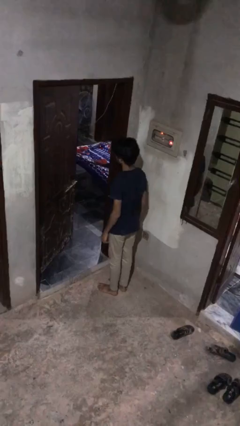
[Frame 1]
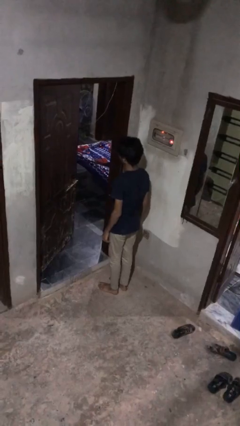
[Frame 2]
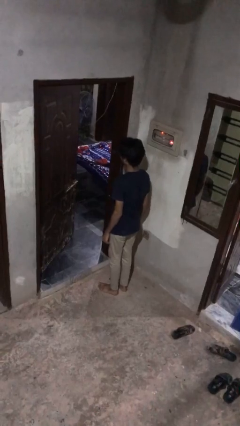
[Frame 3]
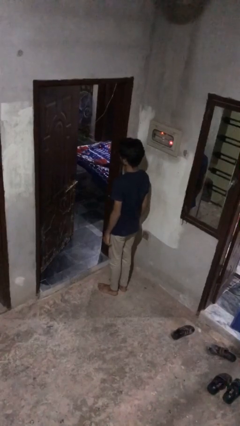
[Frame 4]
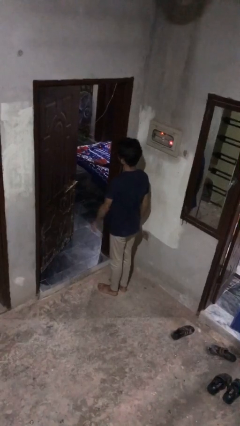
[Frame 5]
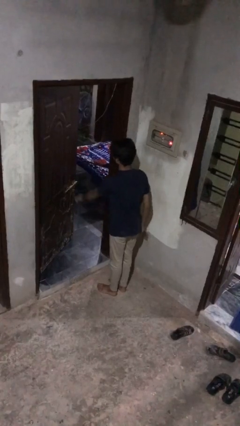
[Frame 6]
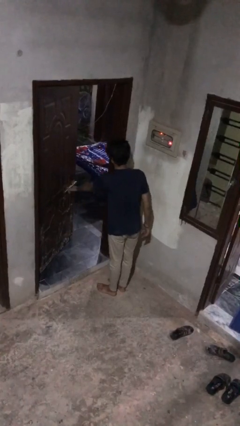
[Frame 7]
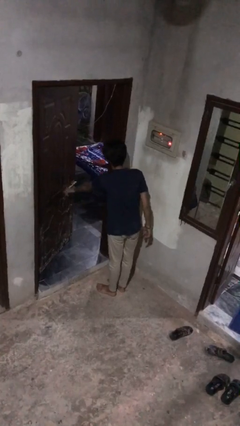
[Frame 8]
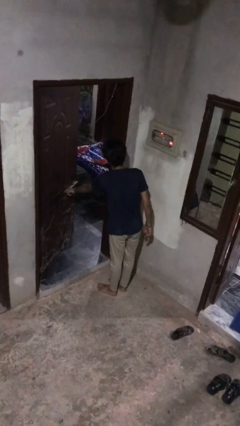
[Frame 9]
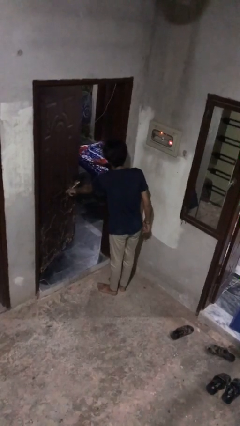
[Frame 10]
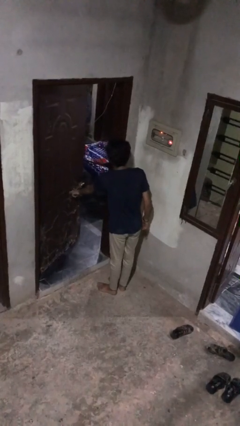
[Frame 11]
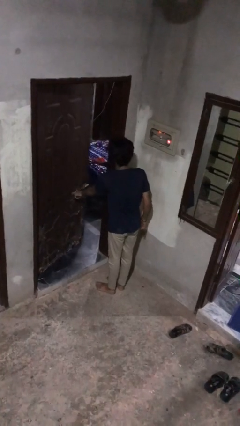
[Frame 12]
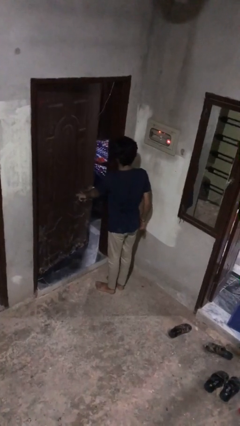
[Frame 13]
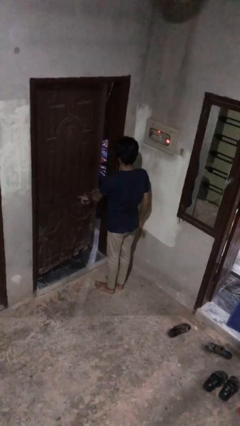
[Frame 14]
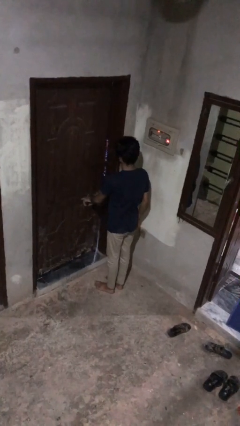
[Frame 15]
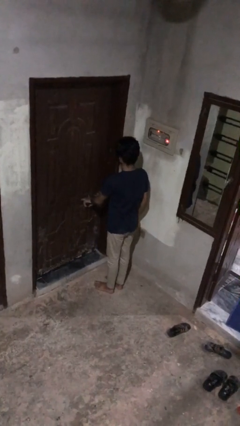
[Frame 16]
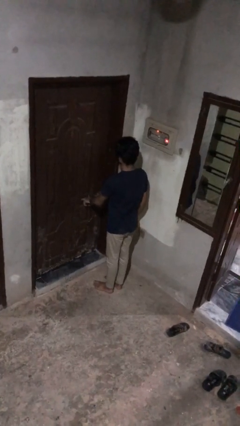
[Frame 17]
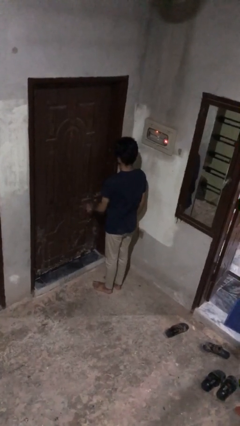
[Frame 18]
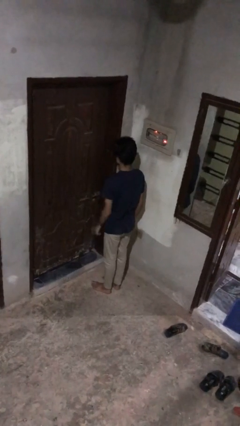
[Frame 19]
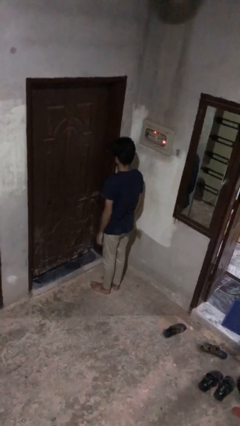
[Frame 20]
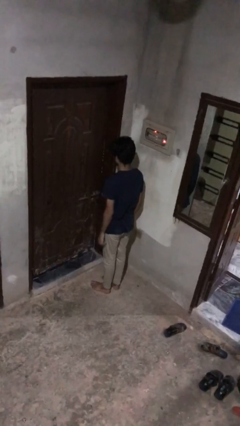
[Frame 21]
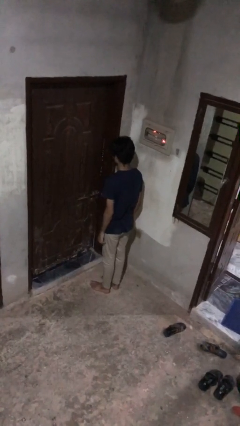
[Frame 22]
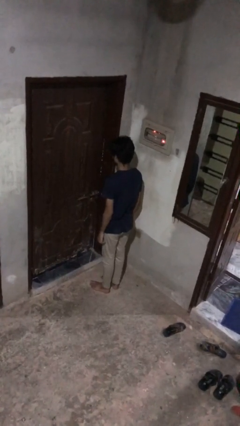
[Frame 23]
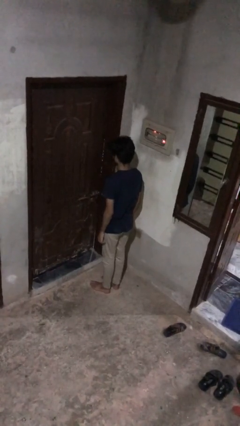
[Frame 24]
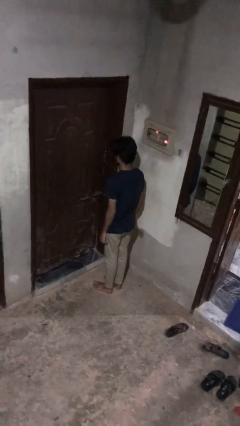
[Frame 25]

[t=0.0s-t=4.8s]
person closes facility door

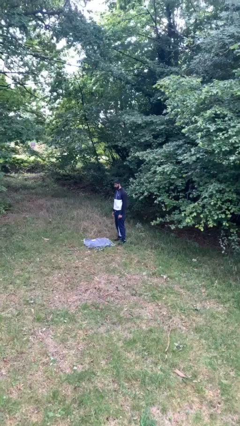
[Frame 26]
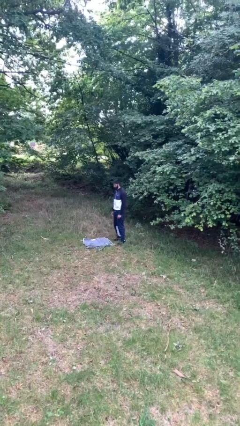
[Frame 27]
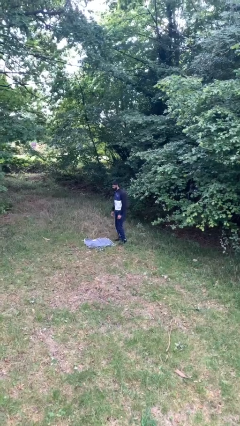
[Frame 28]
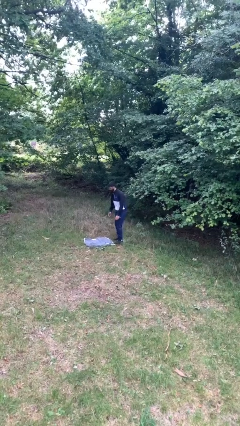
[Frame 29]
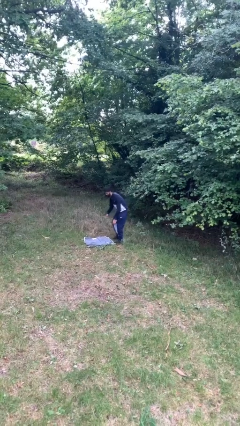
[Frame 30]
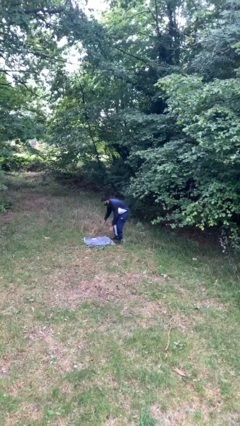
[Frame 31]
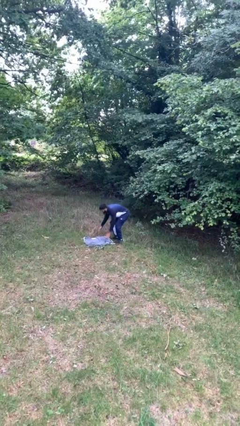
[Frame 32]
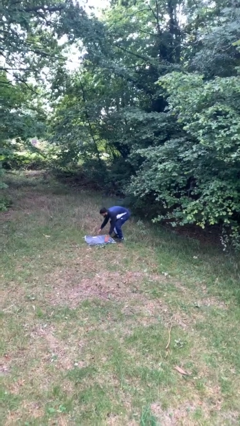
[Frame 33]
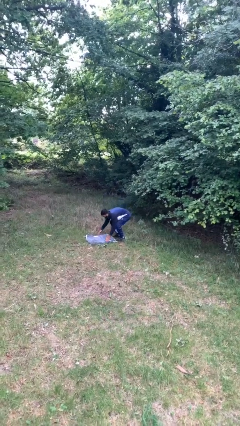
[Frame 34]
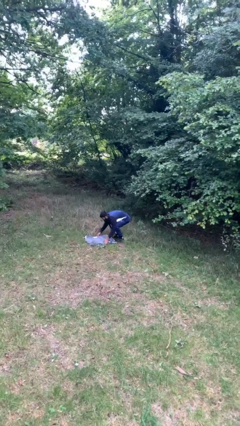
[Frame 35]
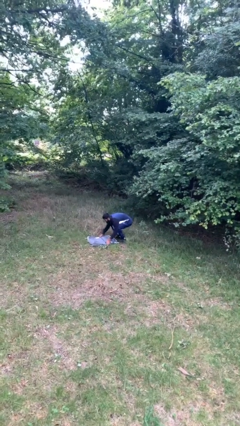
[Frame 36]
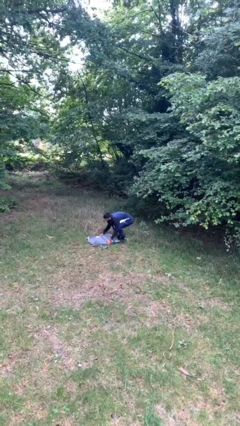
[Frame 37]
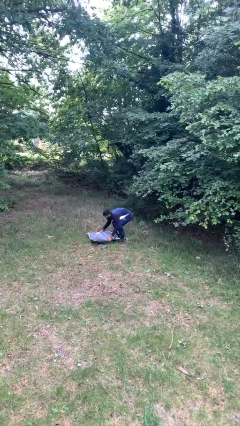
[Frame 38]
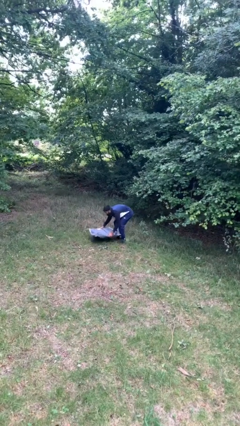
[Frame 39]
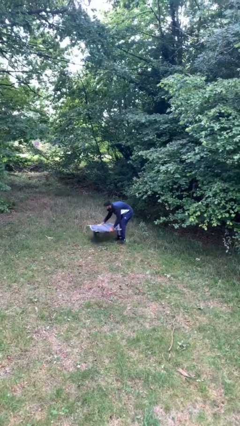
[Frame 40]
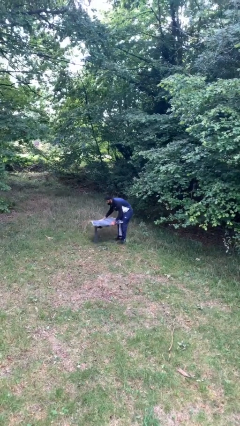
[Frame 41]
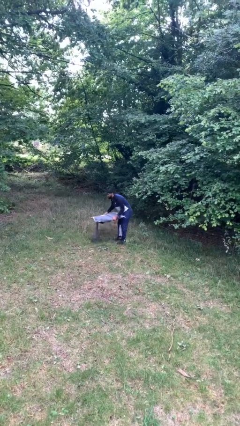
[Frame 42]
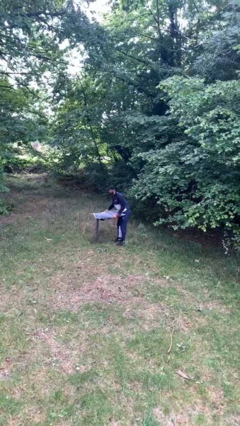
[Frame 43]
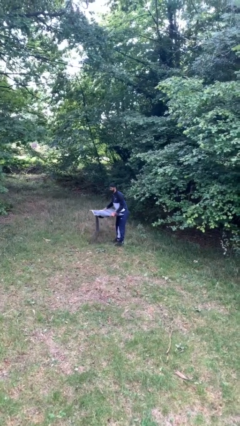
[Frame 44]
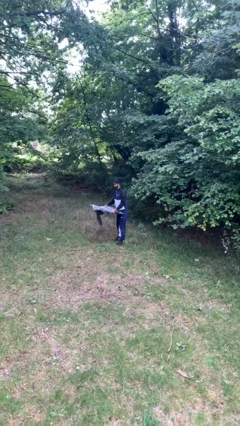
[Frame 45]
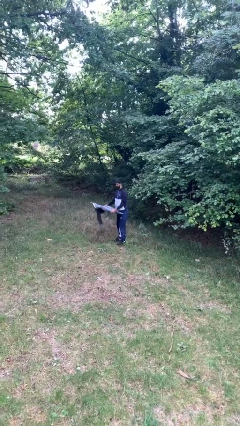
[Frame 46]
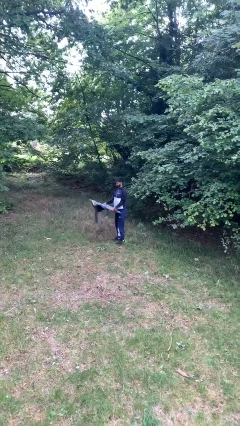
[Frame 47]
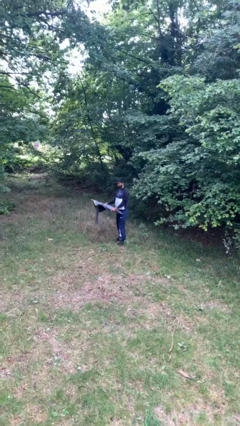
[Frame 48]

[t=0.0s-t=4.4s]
person picks up object from floor

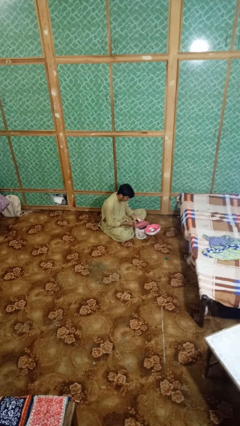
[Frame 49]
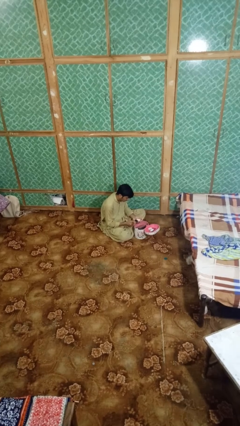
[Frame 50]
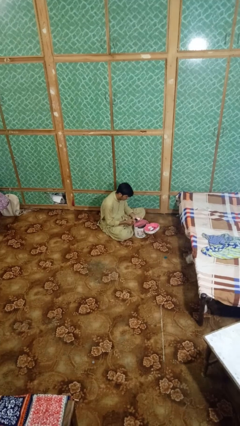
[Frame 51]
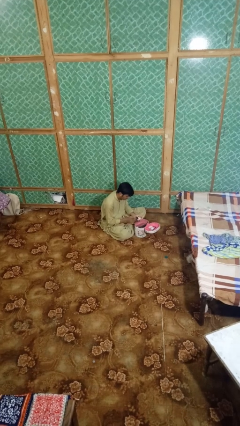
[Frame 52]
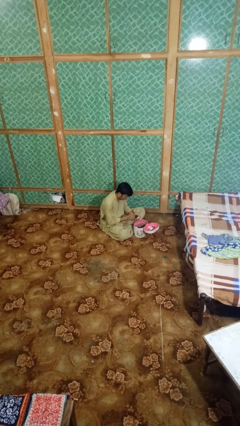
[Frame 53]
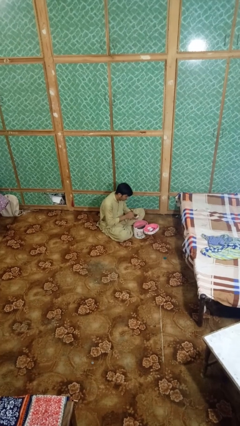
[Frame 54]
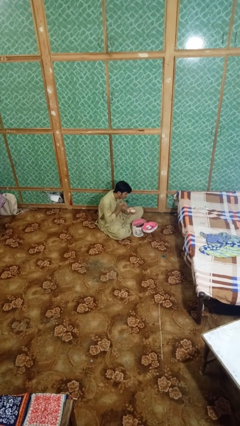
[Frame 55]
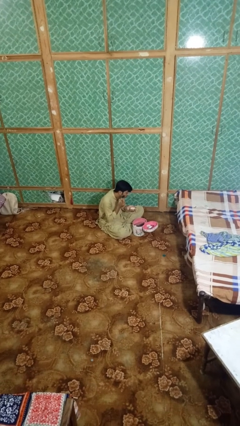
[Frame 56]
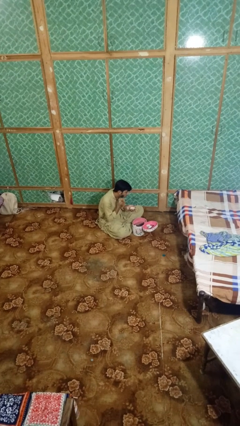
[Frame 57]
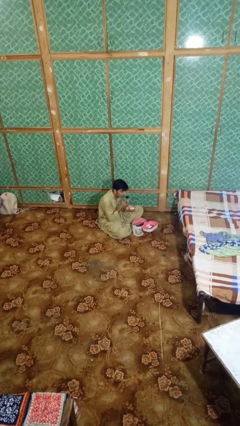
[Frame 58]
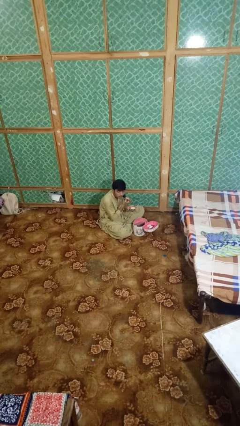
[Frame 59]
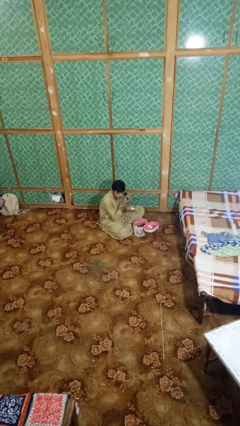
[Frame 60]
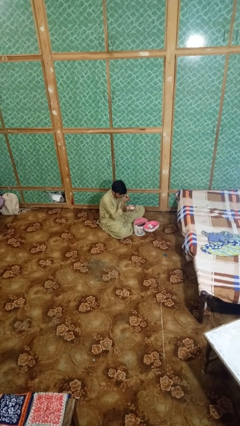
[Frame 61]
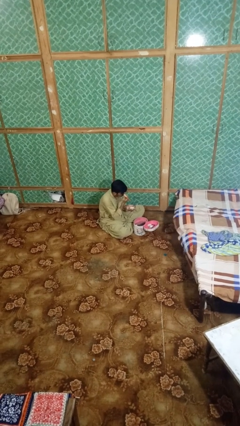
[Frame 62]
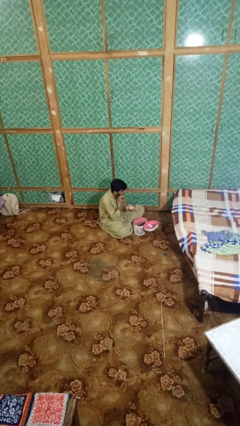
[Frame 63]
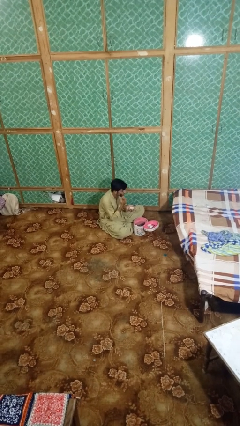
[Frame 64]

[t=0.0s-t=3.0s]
person applies foundation makeup

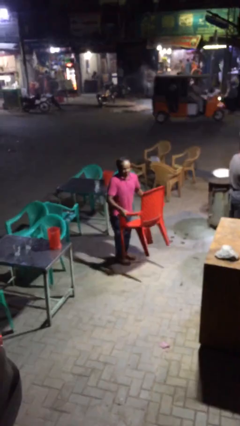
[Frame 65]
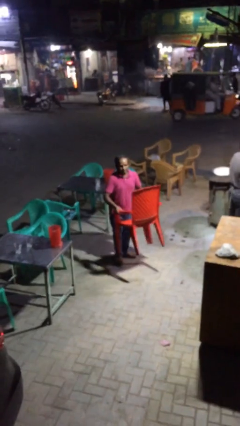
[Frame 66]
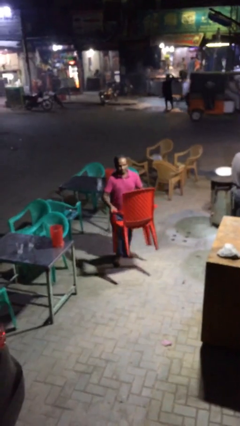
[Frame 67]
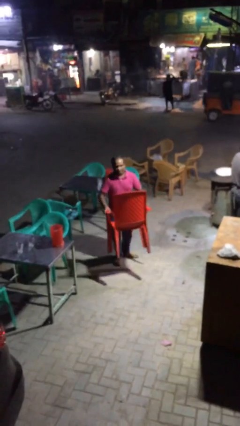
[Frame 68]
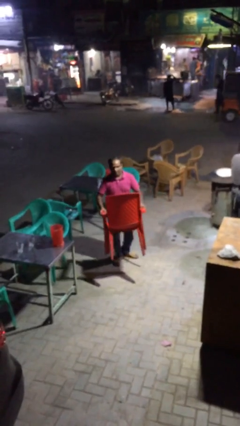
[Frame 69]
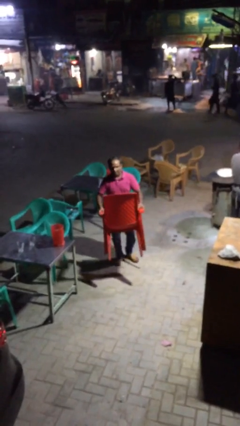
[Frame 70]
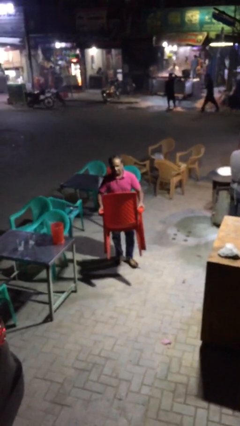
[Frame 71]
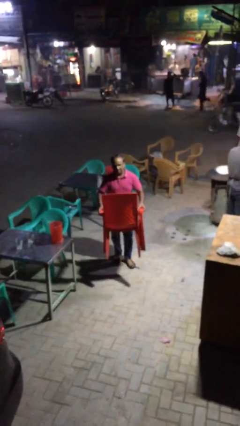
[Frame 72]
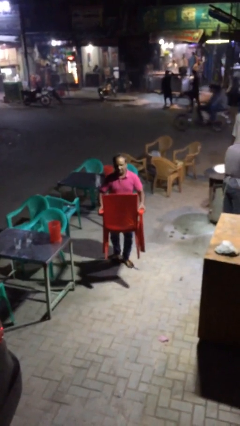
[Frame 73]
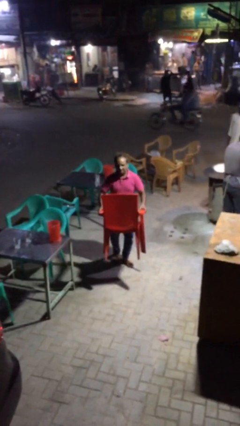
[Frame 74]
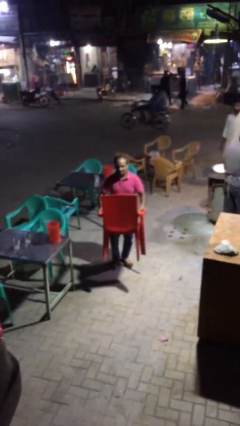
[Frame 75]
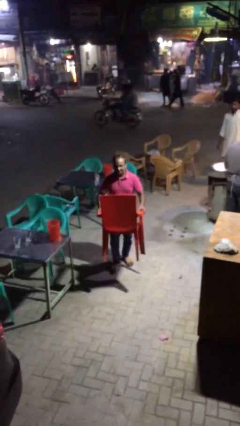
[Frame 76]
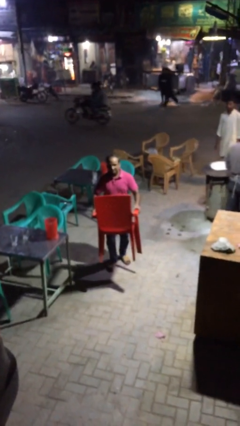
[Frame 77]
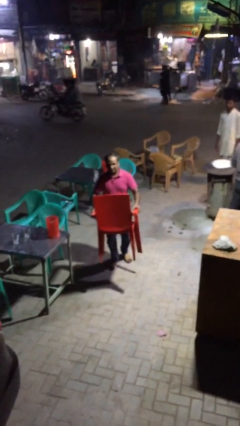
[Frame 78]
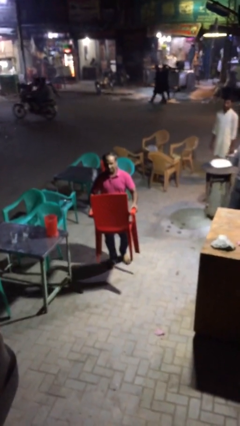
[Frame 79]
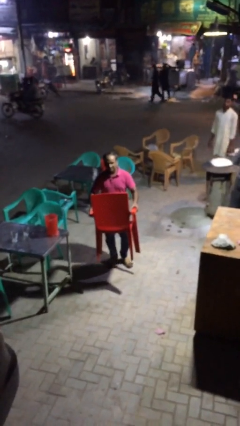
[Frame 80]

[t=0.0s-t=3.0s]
person carries heavy object

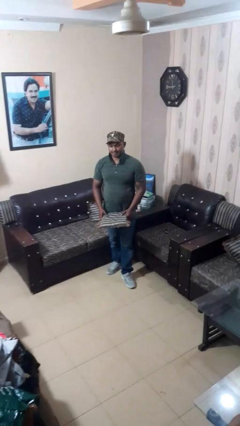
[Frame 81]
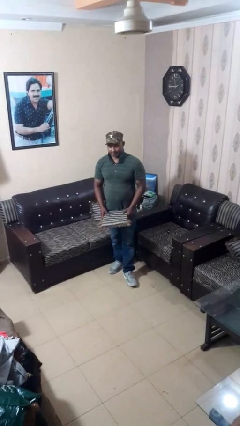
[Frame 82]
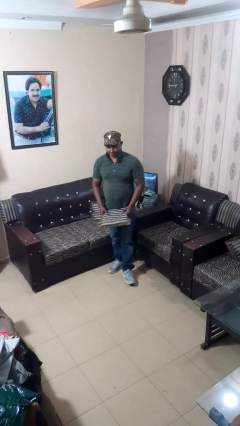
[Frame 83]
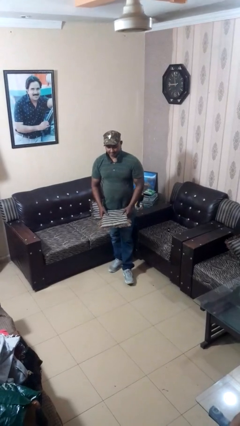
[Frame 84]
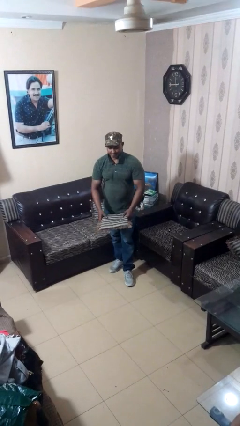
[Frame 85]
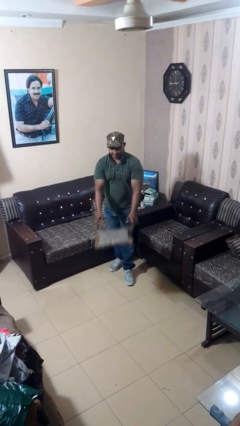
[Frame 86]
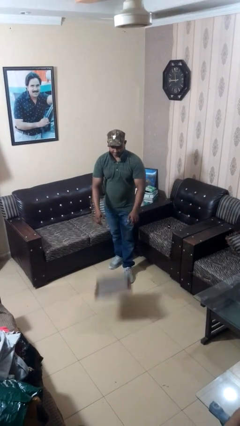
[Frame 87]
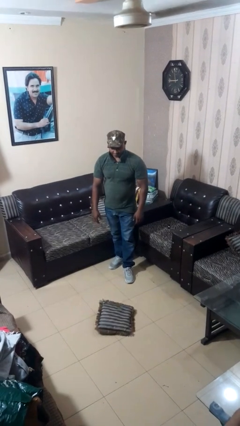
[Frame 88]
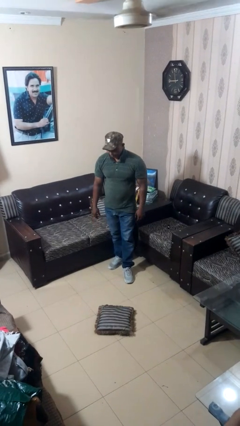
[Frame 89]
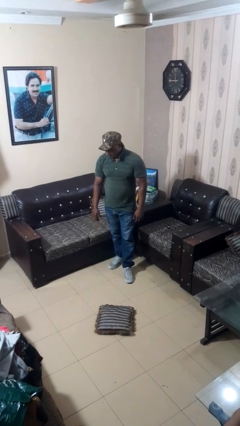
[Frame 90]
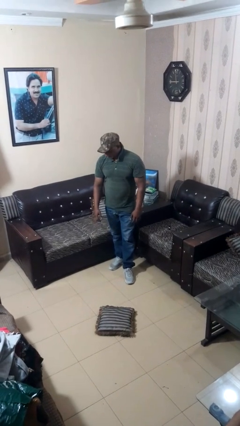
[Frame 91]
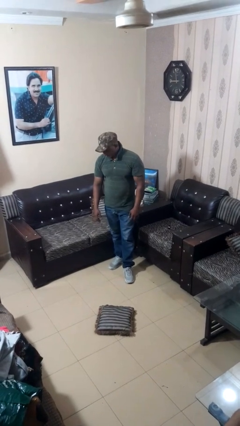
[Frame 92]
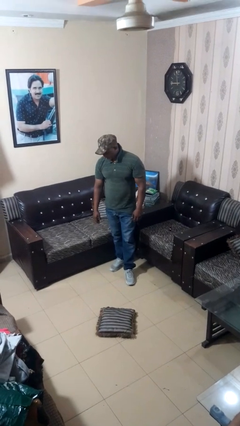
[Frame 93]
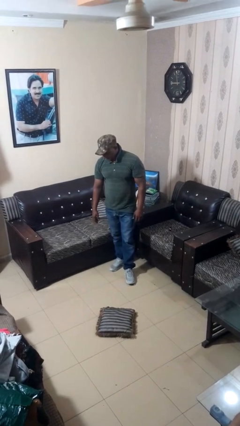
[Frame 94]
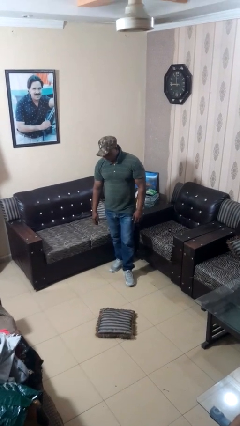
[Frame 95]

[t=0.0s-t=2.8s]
person throws object to ground
